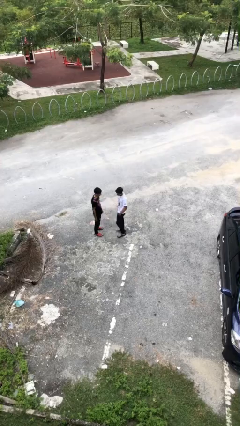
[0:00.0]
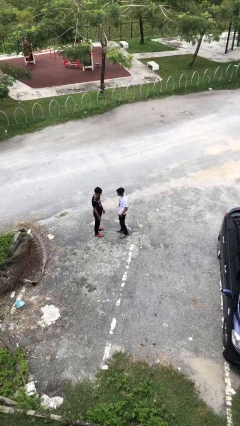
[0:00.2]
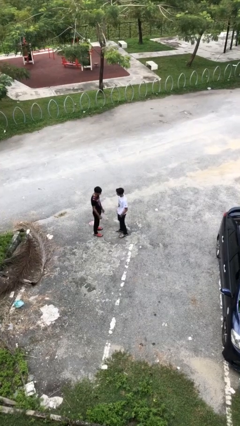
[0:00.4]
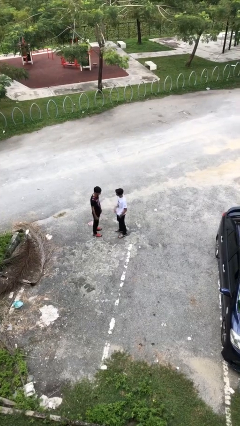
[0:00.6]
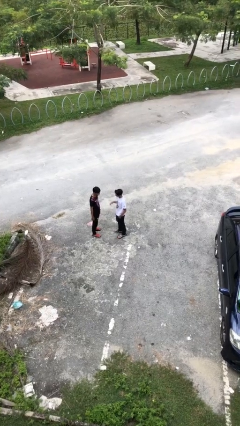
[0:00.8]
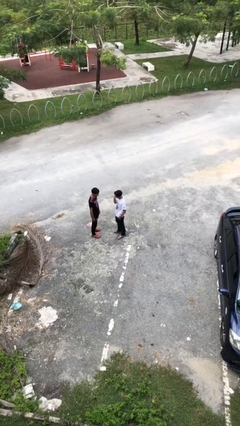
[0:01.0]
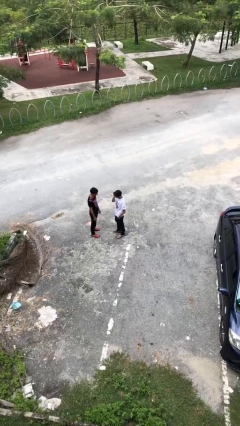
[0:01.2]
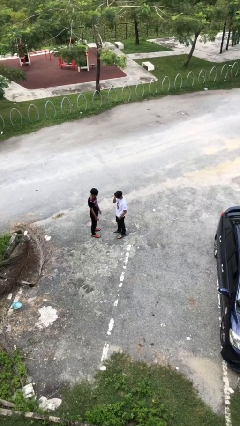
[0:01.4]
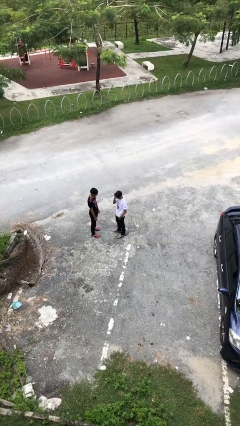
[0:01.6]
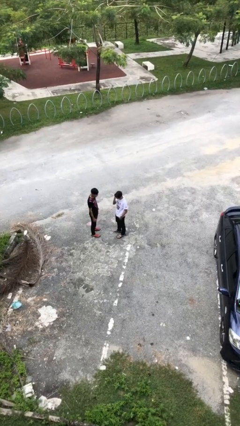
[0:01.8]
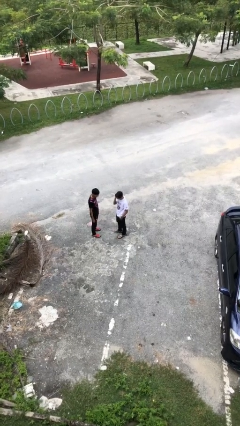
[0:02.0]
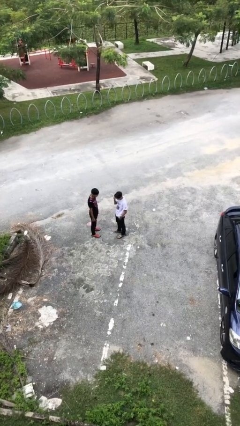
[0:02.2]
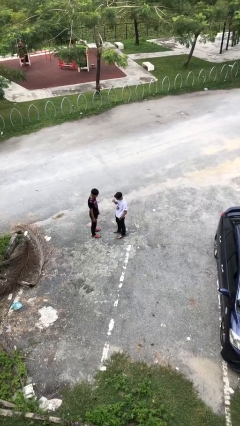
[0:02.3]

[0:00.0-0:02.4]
person talks to person

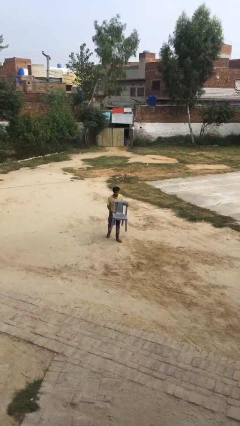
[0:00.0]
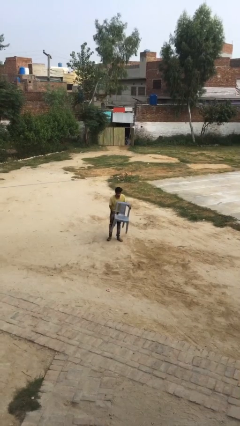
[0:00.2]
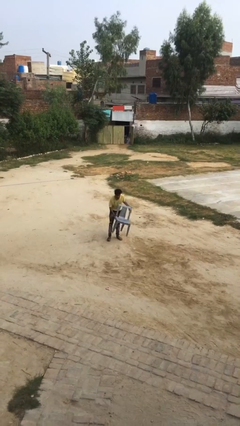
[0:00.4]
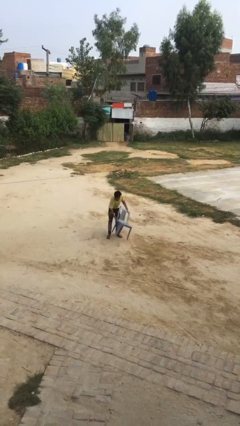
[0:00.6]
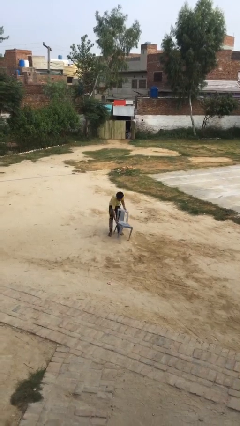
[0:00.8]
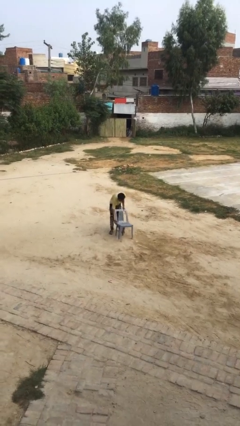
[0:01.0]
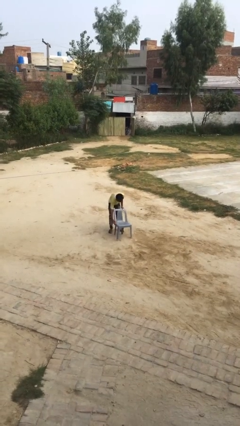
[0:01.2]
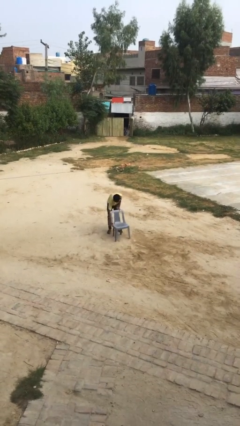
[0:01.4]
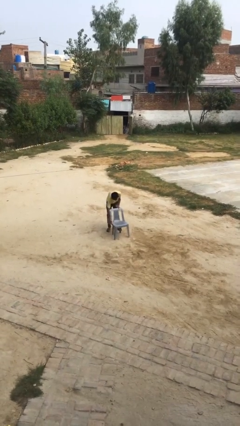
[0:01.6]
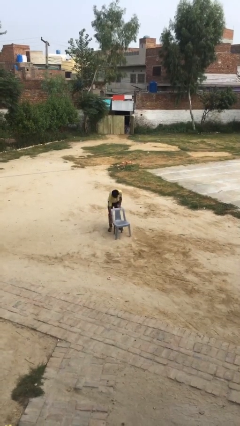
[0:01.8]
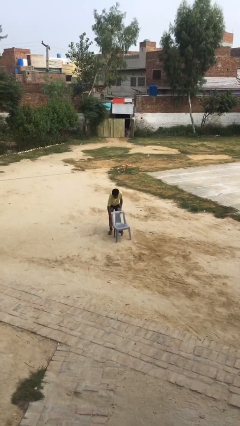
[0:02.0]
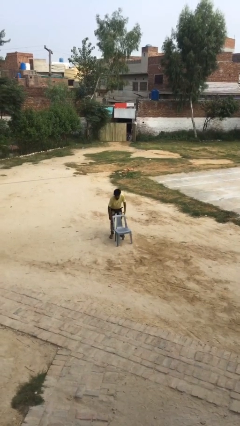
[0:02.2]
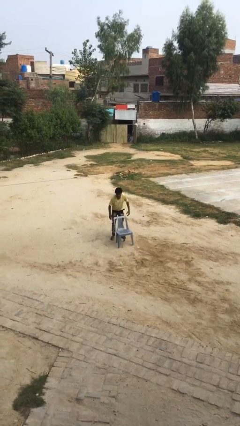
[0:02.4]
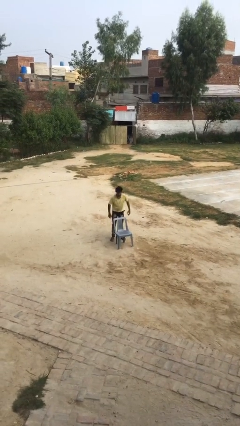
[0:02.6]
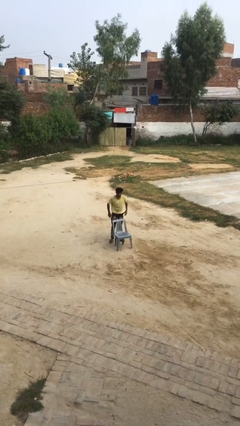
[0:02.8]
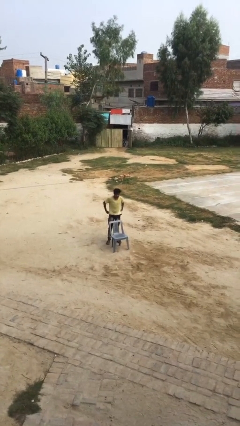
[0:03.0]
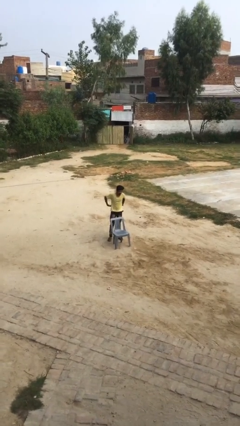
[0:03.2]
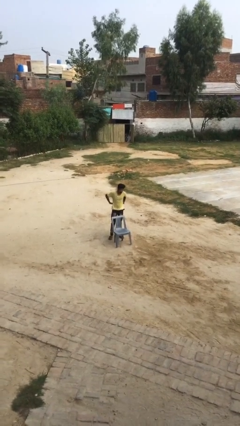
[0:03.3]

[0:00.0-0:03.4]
person puts down object on floor

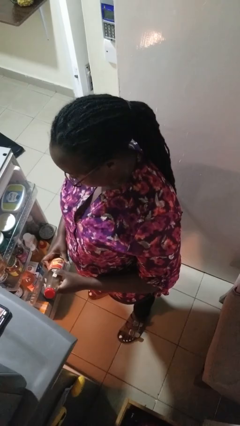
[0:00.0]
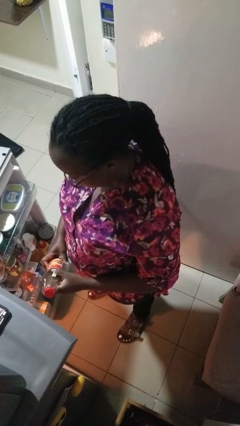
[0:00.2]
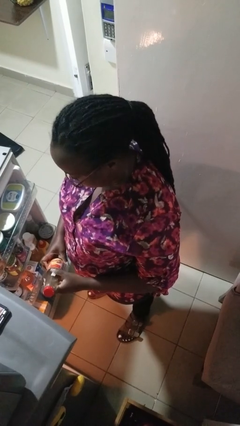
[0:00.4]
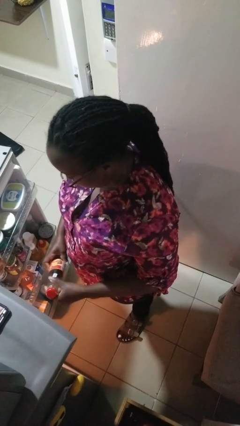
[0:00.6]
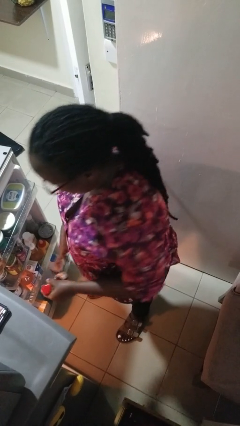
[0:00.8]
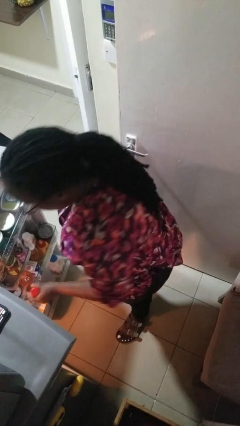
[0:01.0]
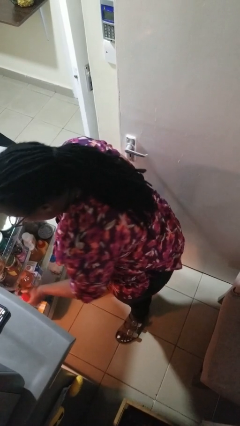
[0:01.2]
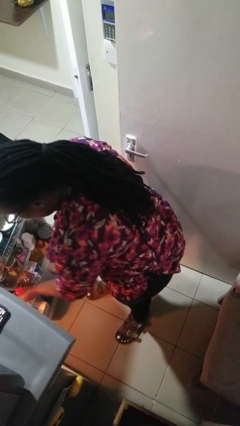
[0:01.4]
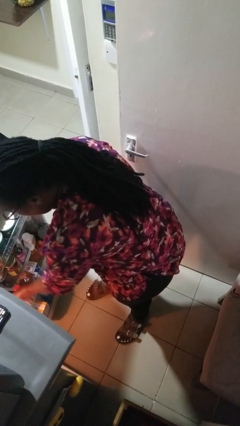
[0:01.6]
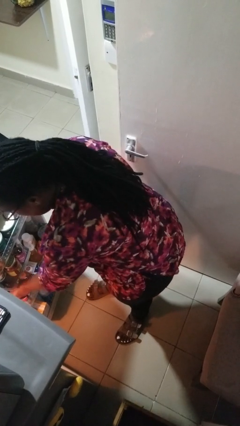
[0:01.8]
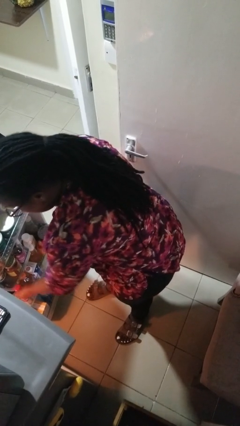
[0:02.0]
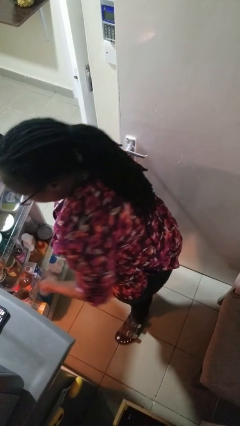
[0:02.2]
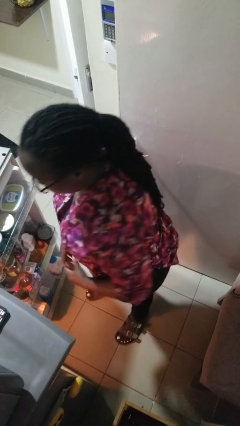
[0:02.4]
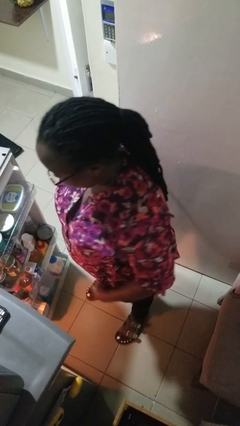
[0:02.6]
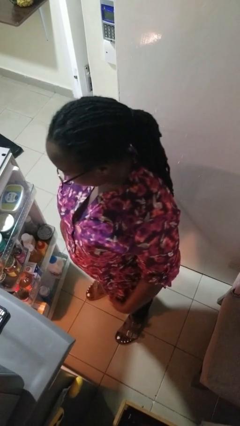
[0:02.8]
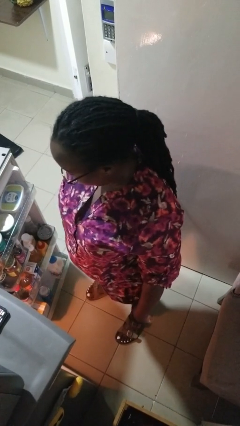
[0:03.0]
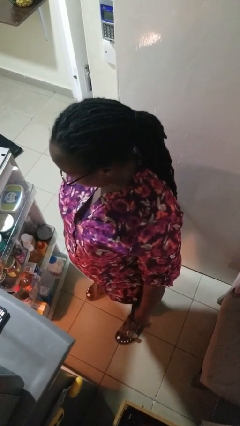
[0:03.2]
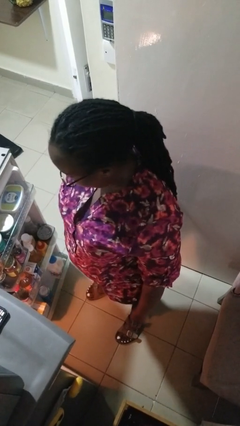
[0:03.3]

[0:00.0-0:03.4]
person puts object into refrigerator

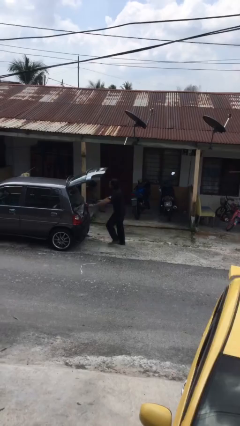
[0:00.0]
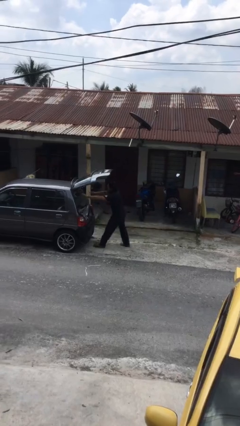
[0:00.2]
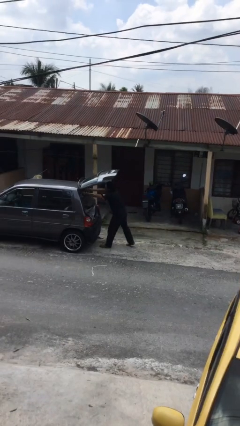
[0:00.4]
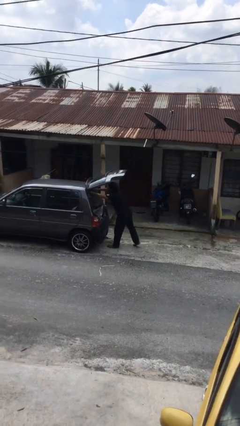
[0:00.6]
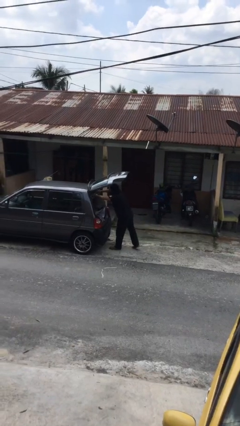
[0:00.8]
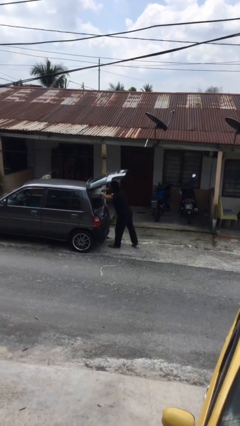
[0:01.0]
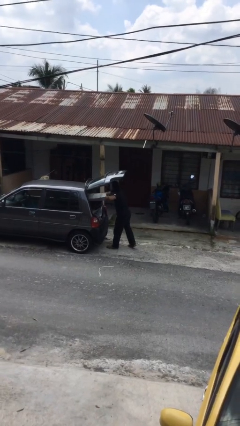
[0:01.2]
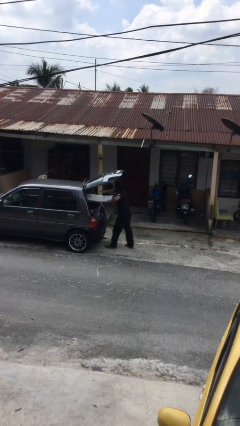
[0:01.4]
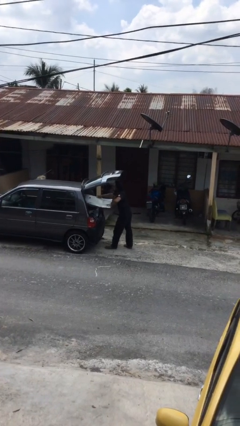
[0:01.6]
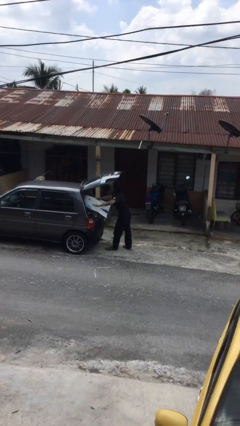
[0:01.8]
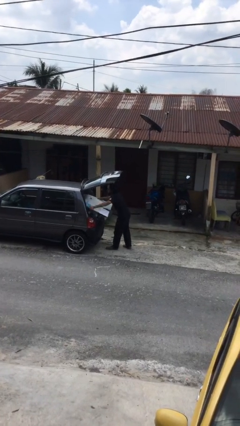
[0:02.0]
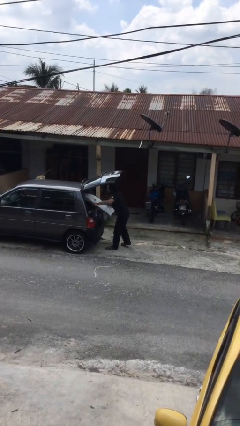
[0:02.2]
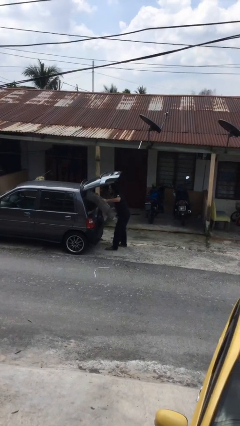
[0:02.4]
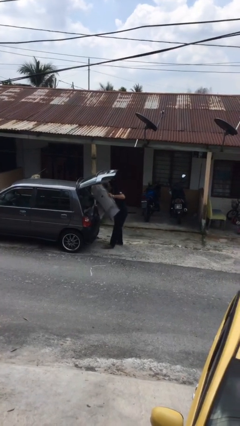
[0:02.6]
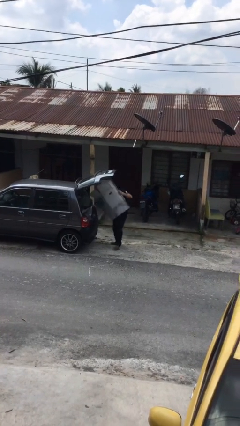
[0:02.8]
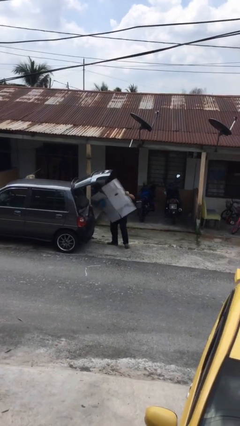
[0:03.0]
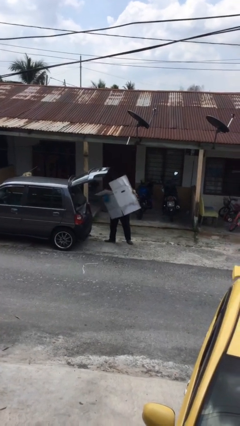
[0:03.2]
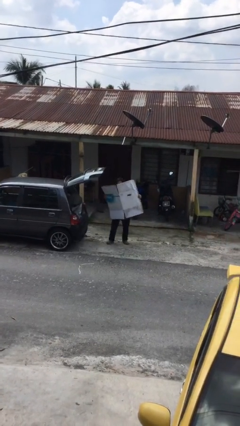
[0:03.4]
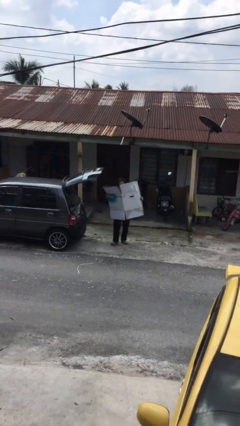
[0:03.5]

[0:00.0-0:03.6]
person unloads car

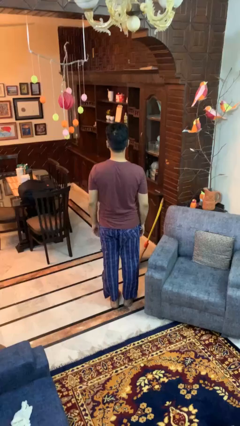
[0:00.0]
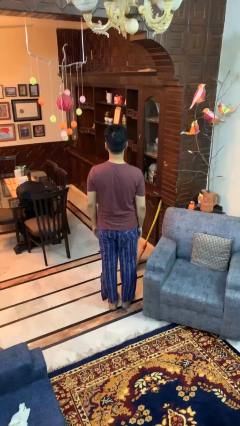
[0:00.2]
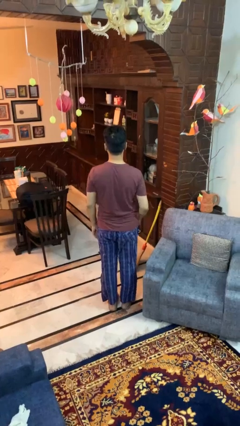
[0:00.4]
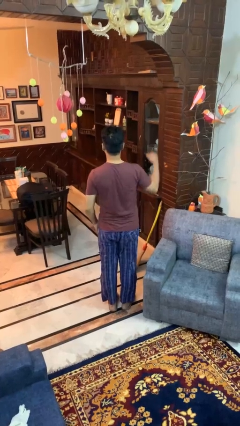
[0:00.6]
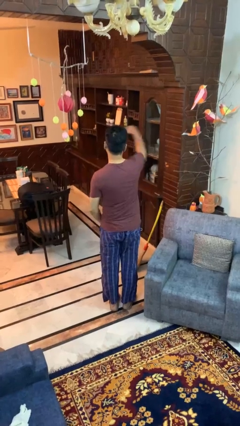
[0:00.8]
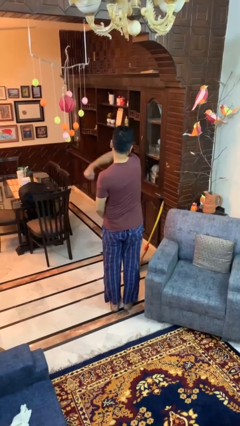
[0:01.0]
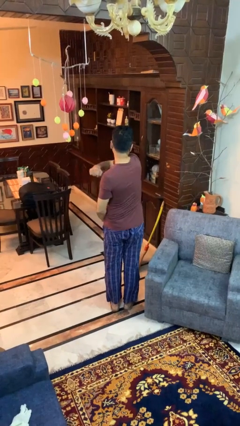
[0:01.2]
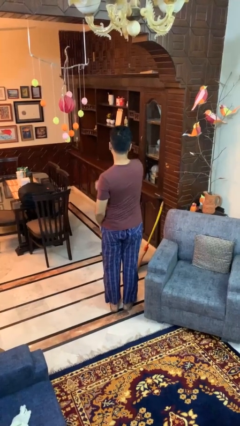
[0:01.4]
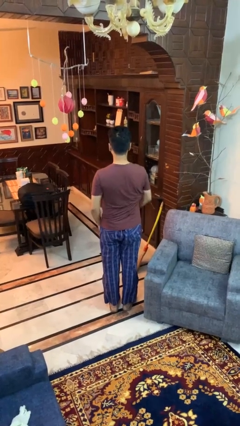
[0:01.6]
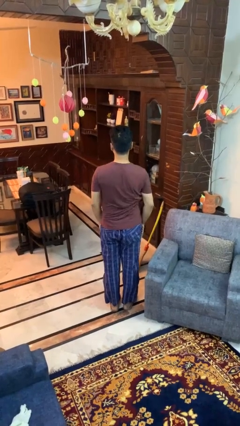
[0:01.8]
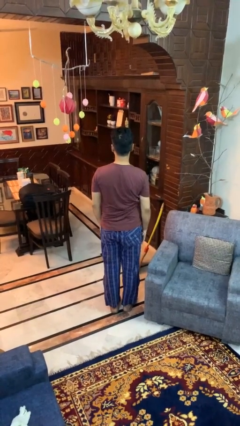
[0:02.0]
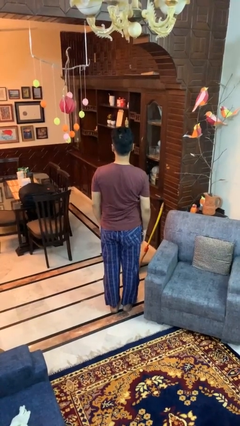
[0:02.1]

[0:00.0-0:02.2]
person karate chop

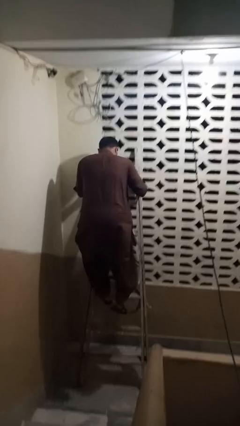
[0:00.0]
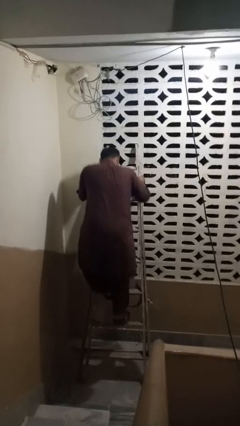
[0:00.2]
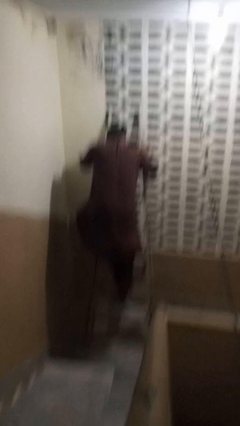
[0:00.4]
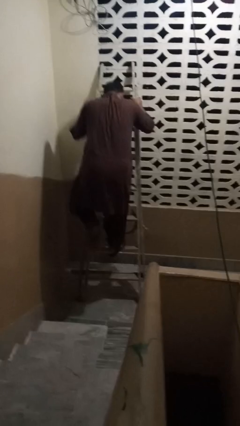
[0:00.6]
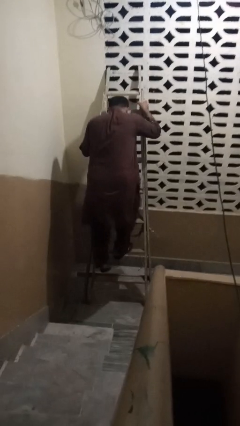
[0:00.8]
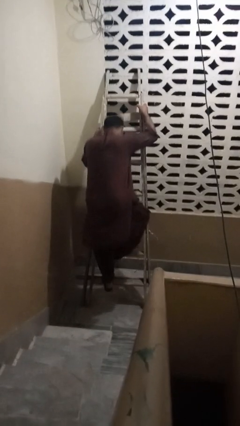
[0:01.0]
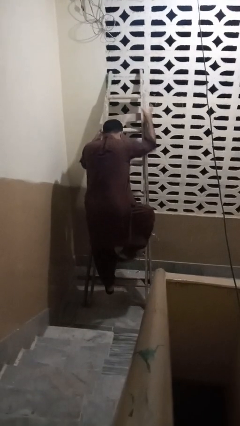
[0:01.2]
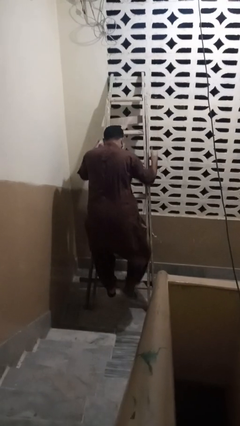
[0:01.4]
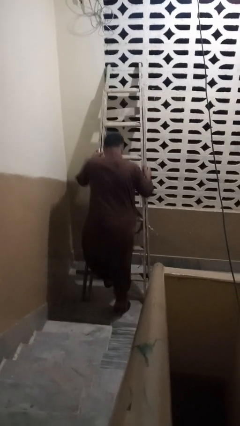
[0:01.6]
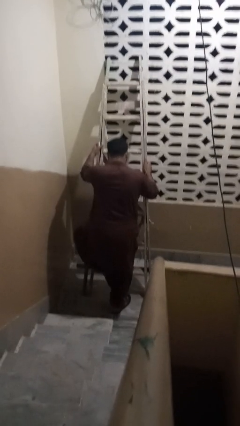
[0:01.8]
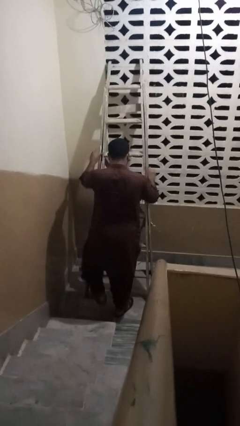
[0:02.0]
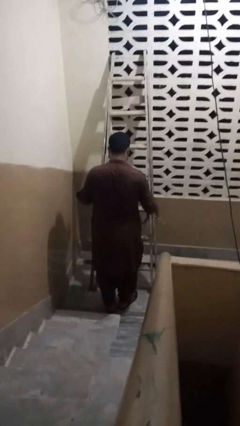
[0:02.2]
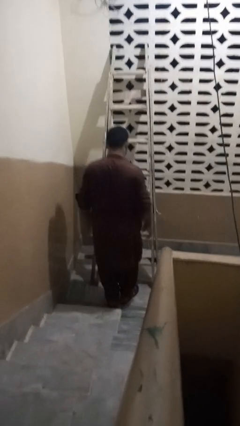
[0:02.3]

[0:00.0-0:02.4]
person climbs down ladder

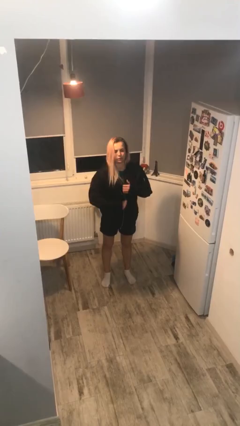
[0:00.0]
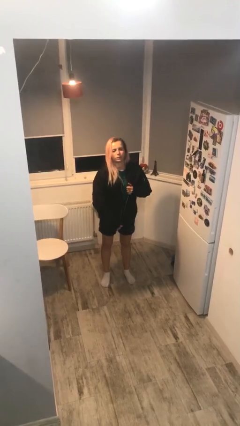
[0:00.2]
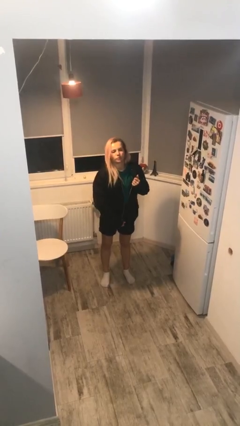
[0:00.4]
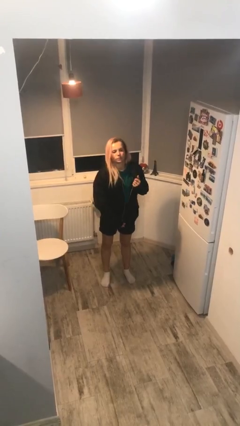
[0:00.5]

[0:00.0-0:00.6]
person unzips jacket
